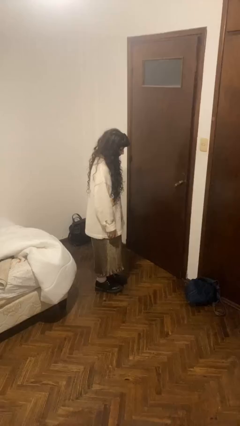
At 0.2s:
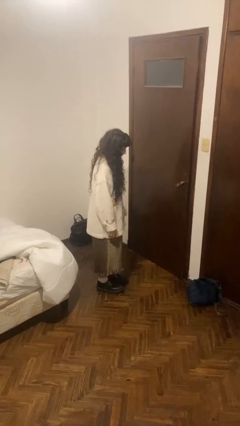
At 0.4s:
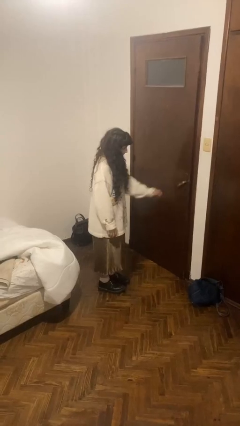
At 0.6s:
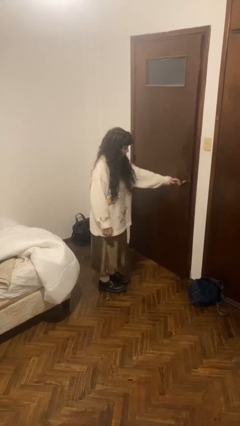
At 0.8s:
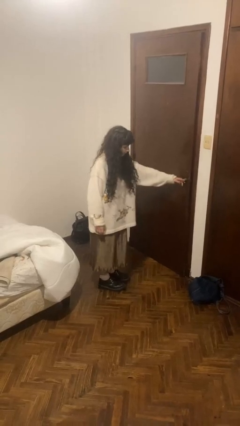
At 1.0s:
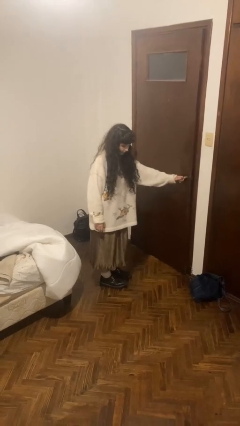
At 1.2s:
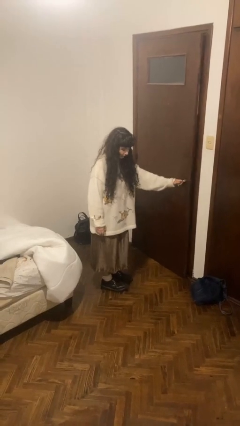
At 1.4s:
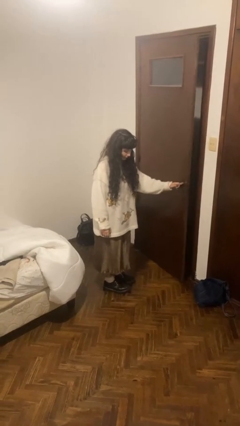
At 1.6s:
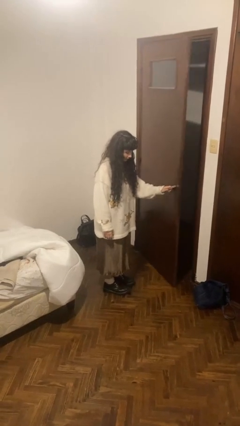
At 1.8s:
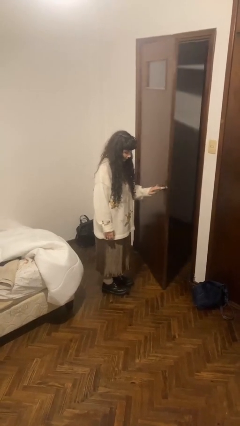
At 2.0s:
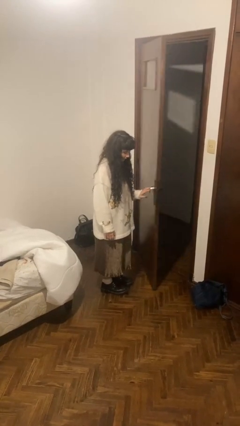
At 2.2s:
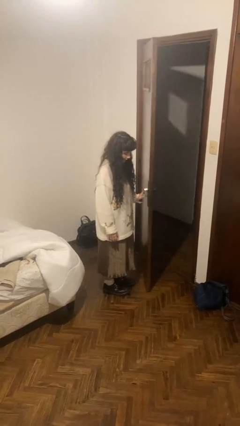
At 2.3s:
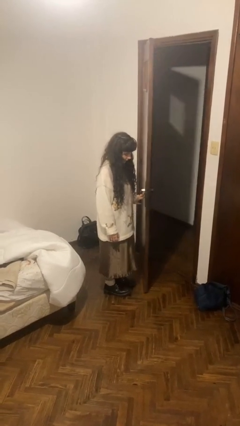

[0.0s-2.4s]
person opens facility door

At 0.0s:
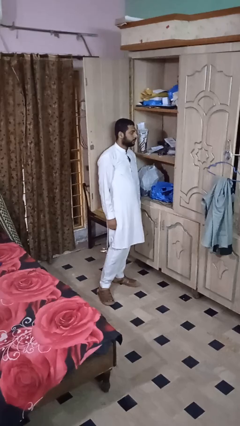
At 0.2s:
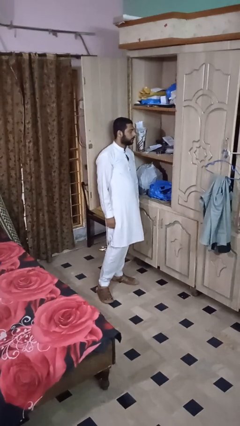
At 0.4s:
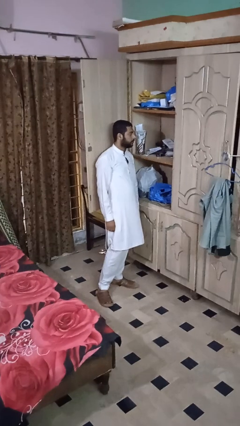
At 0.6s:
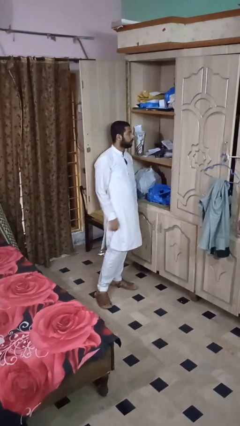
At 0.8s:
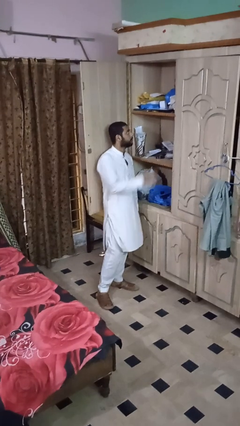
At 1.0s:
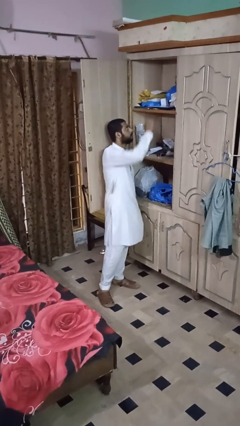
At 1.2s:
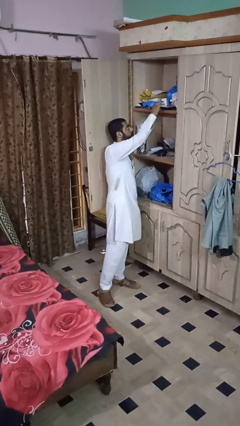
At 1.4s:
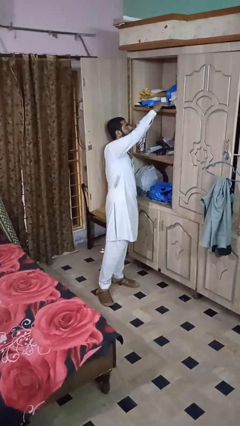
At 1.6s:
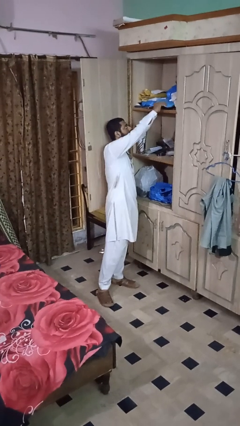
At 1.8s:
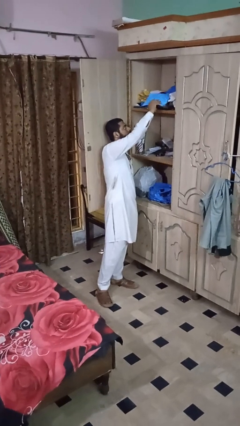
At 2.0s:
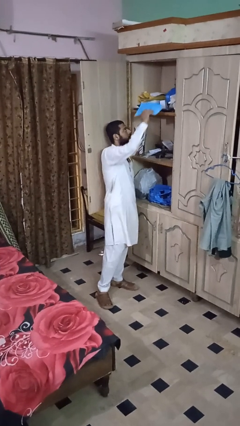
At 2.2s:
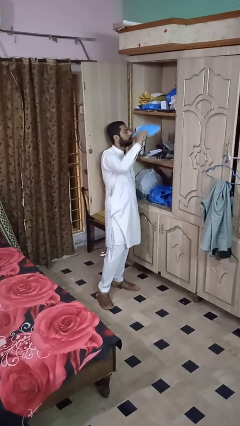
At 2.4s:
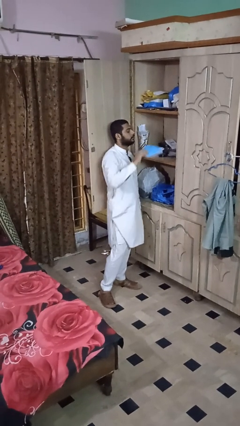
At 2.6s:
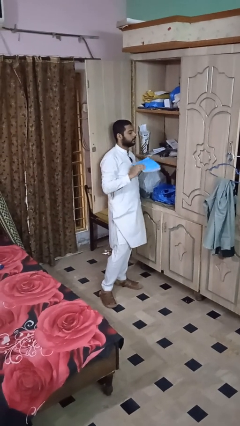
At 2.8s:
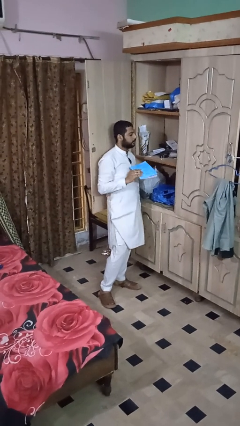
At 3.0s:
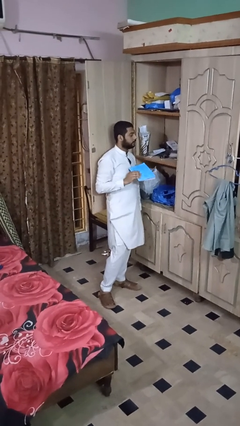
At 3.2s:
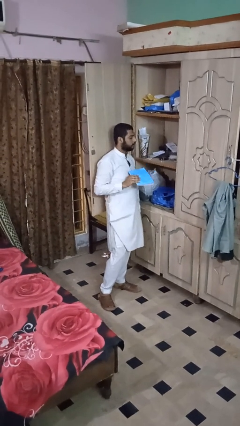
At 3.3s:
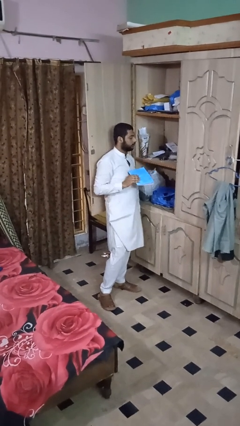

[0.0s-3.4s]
person picks up object from shelf

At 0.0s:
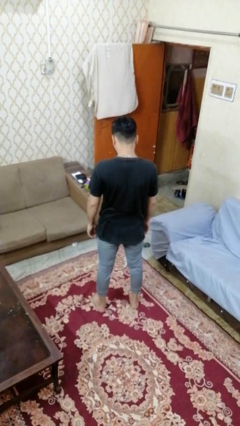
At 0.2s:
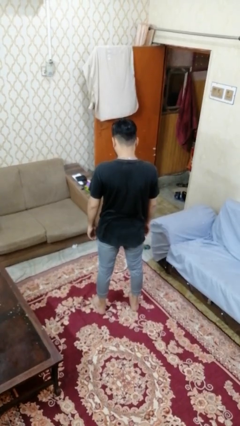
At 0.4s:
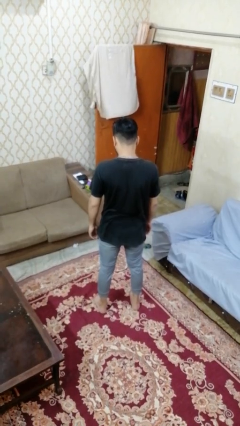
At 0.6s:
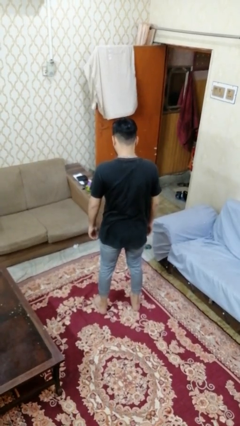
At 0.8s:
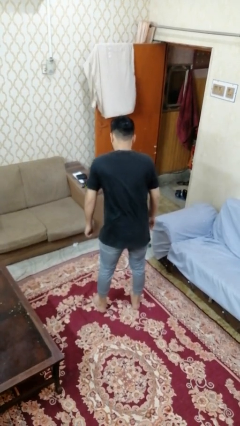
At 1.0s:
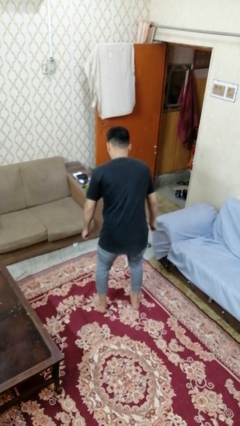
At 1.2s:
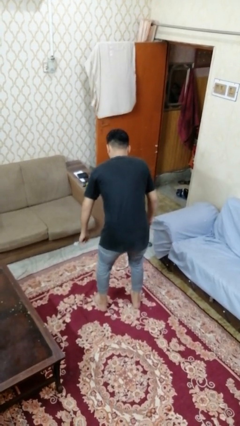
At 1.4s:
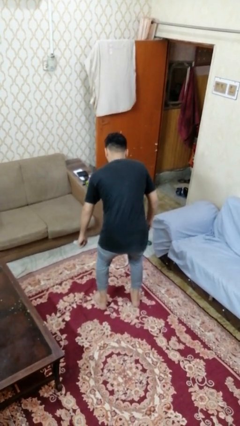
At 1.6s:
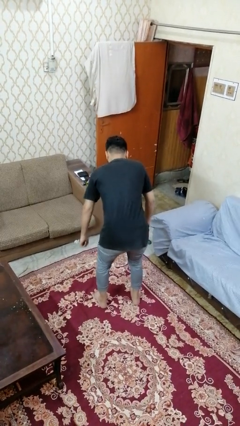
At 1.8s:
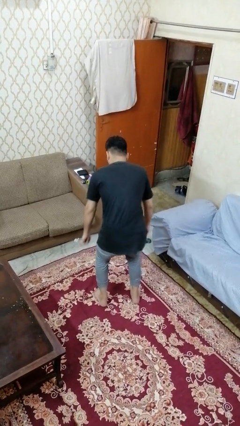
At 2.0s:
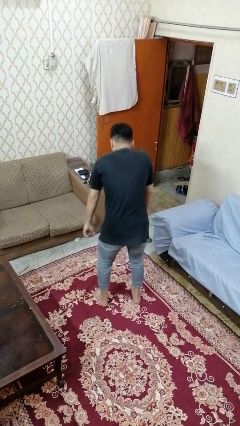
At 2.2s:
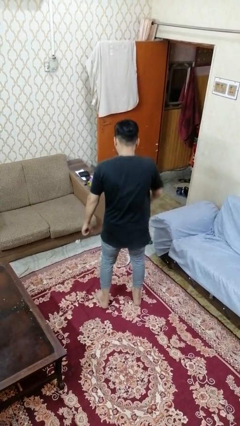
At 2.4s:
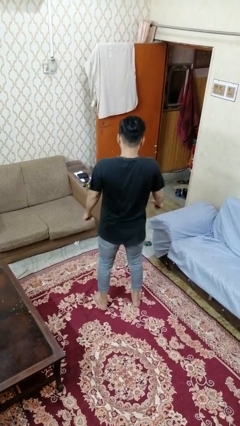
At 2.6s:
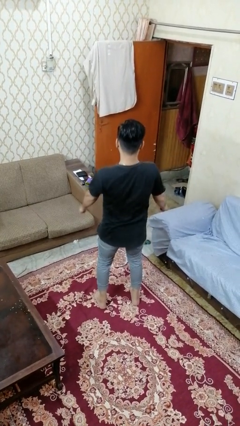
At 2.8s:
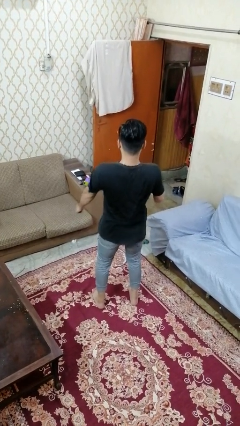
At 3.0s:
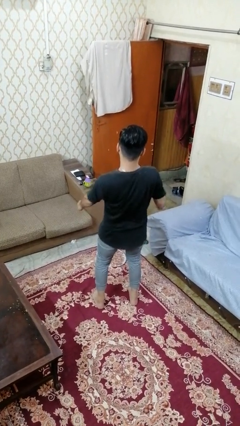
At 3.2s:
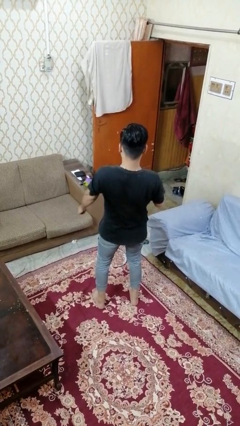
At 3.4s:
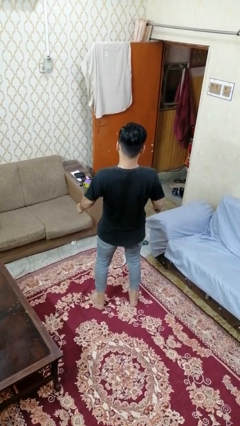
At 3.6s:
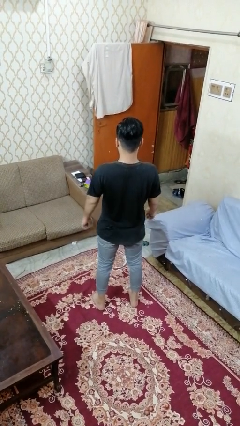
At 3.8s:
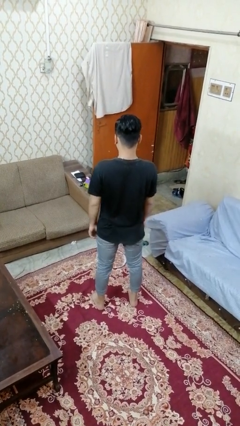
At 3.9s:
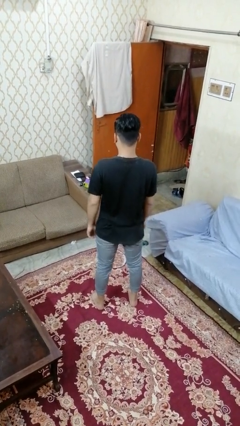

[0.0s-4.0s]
person dances in place

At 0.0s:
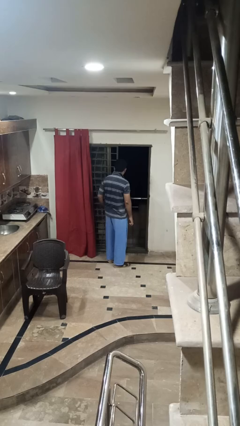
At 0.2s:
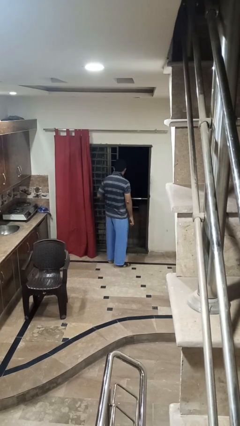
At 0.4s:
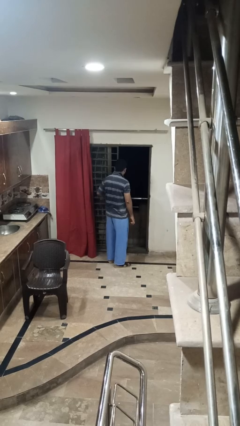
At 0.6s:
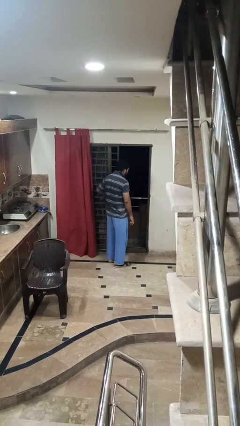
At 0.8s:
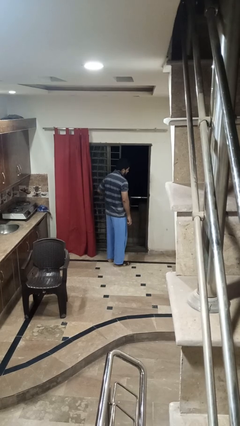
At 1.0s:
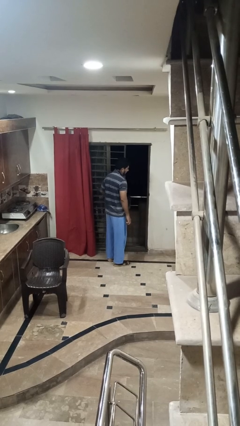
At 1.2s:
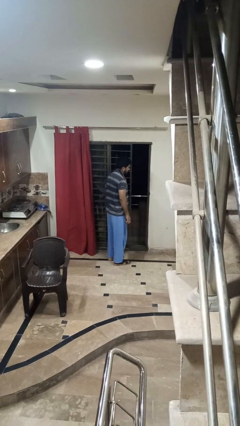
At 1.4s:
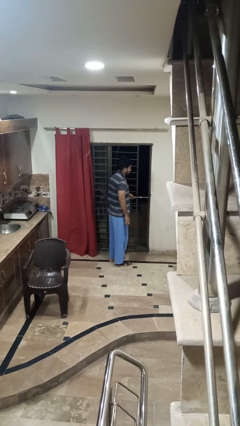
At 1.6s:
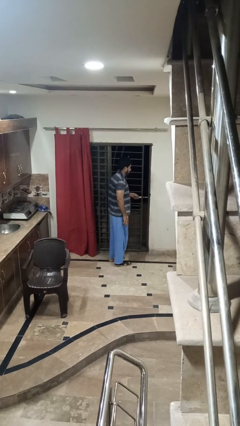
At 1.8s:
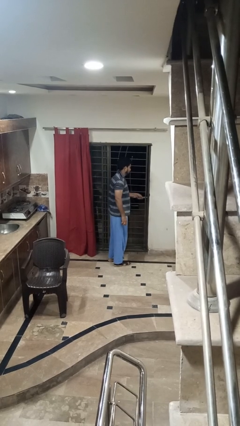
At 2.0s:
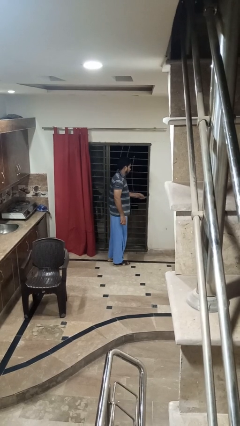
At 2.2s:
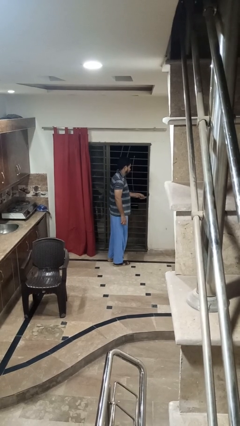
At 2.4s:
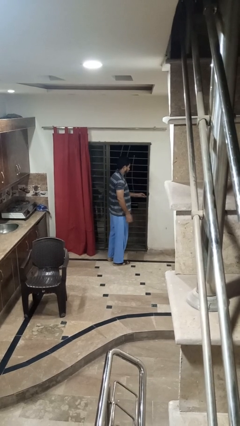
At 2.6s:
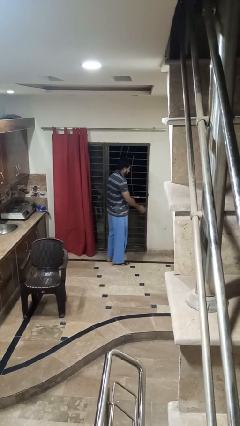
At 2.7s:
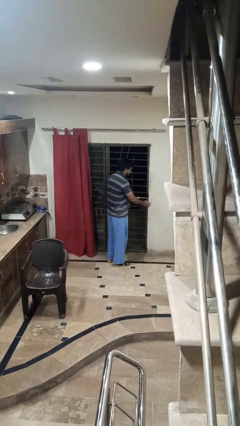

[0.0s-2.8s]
person closes facility door

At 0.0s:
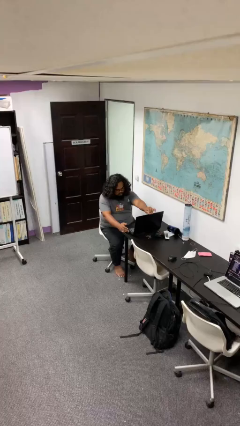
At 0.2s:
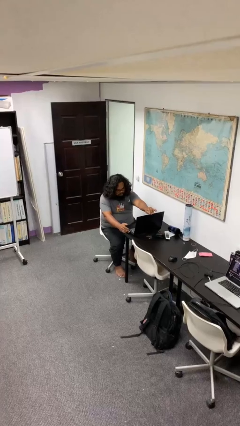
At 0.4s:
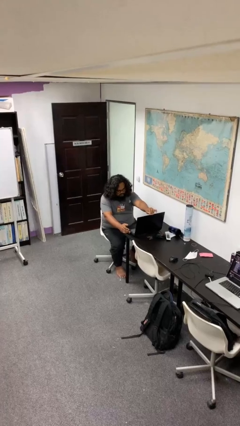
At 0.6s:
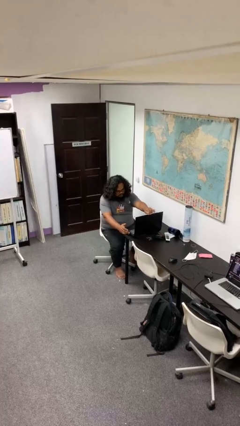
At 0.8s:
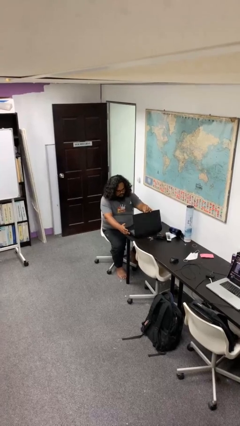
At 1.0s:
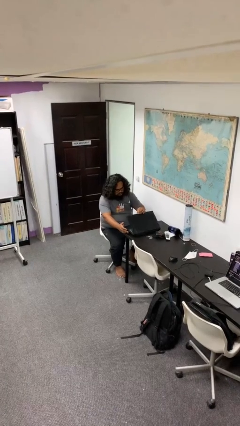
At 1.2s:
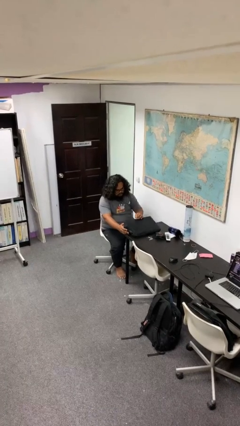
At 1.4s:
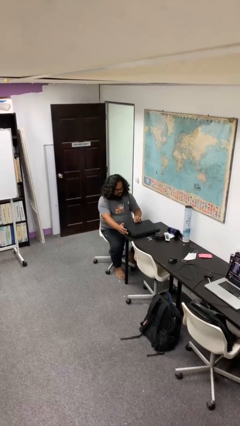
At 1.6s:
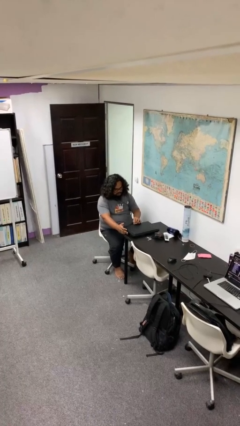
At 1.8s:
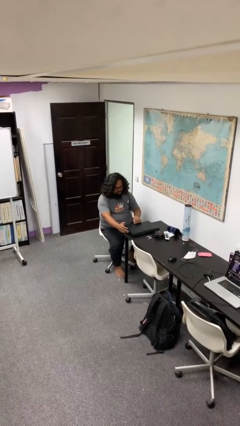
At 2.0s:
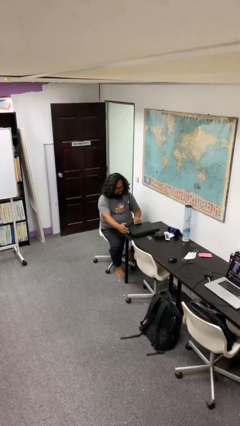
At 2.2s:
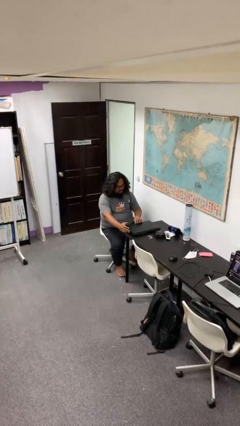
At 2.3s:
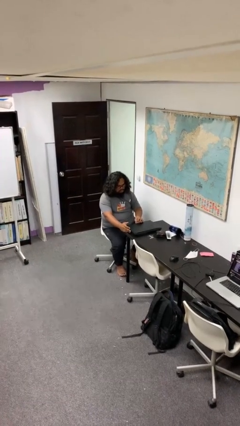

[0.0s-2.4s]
person closes laptop

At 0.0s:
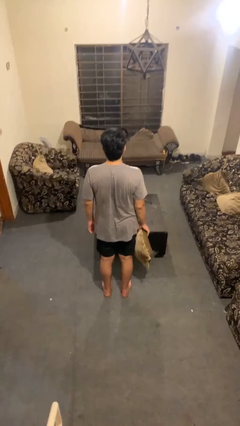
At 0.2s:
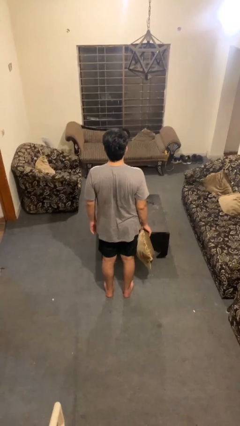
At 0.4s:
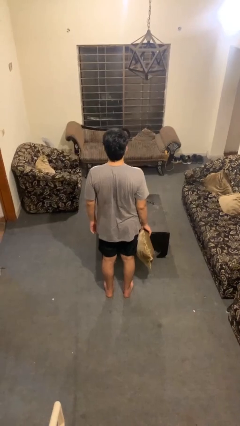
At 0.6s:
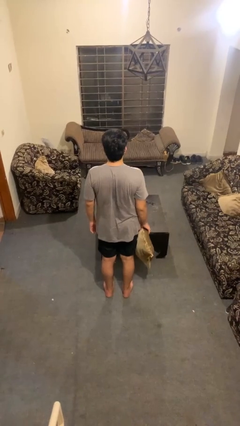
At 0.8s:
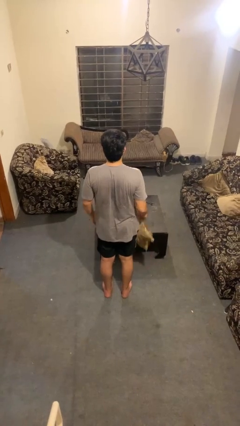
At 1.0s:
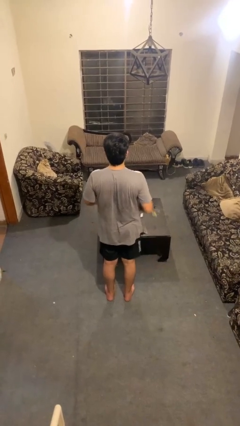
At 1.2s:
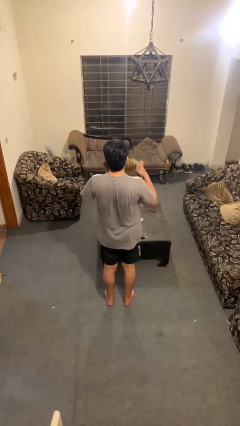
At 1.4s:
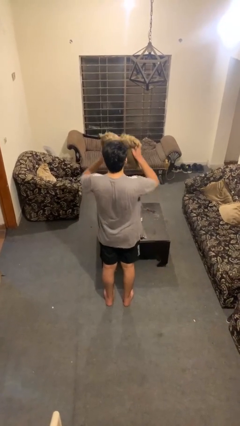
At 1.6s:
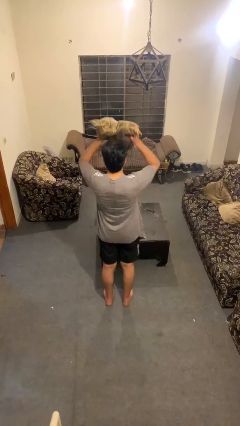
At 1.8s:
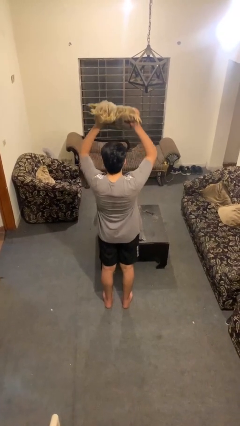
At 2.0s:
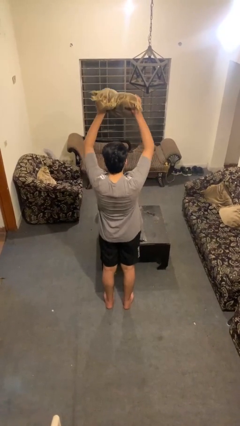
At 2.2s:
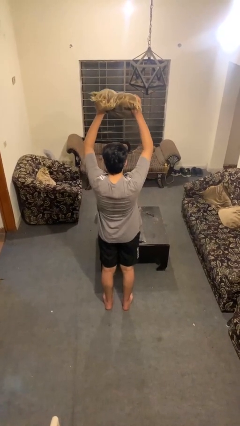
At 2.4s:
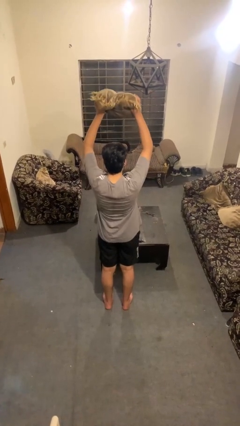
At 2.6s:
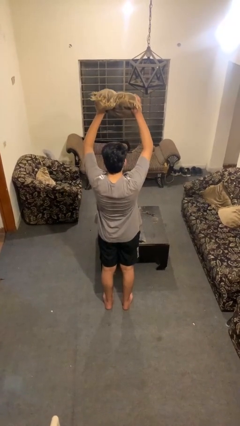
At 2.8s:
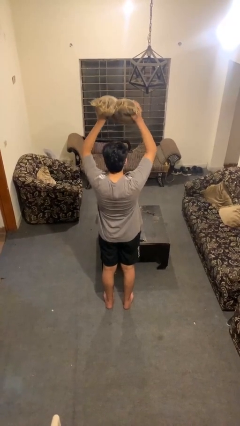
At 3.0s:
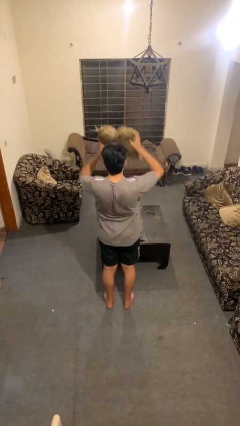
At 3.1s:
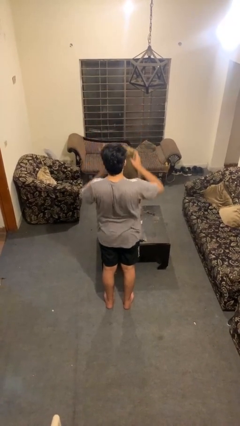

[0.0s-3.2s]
person holds object above head
